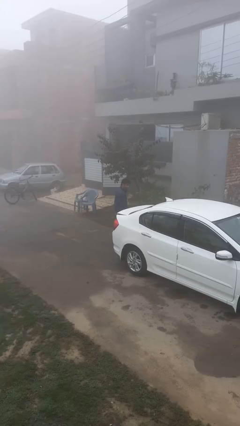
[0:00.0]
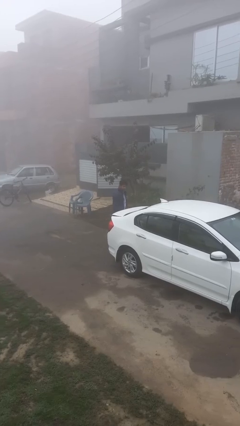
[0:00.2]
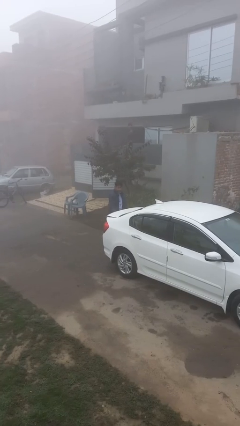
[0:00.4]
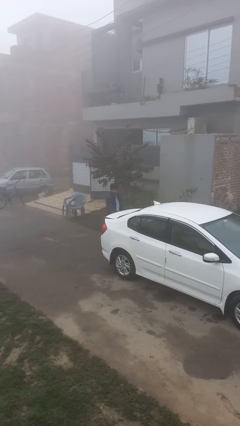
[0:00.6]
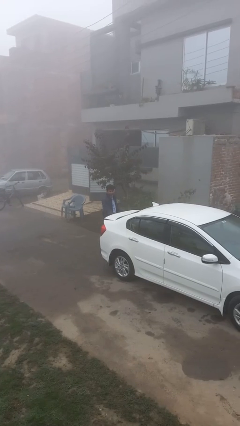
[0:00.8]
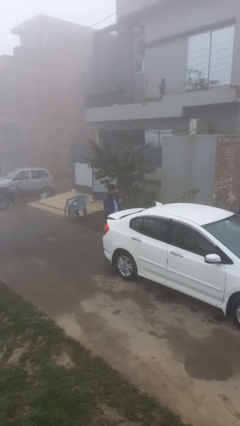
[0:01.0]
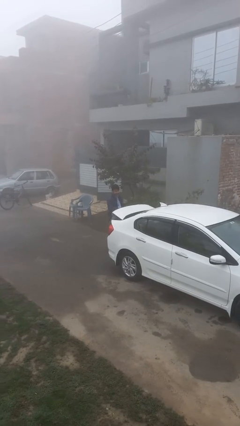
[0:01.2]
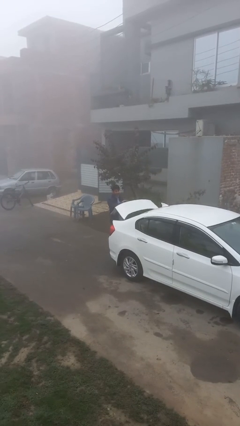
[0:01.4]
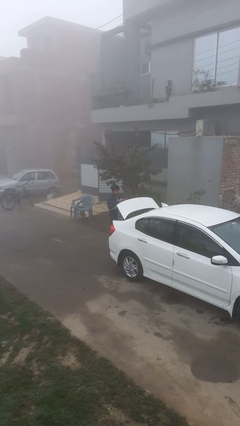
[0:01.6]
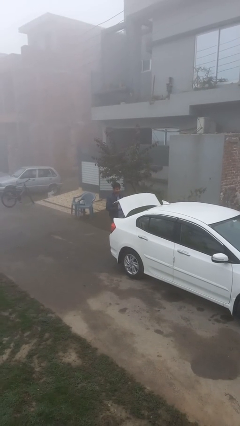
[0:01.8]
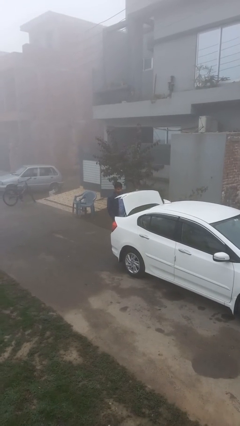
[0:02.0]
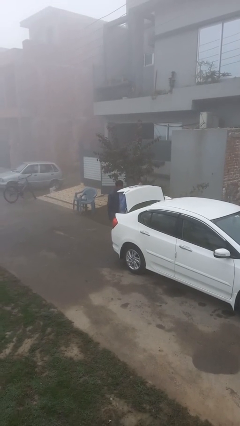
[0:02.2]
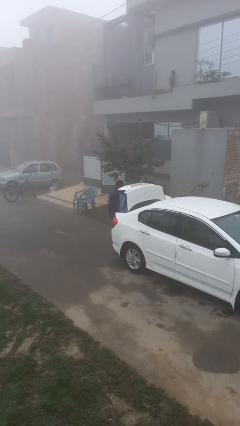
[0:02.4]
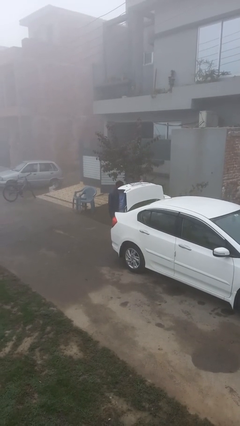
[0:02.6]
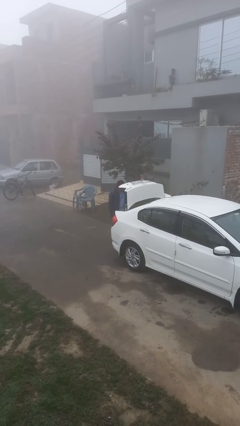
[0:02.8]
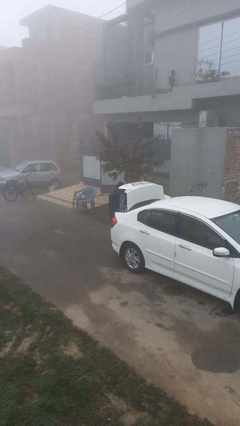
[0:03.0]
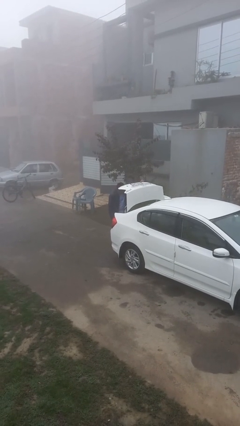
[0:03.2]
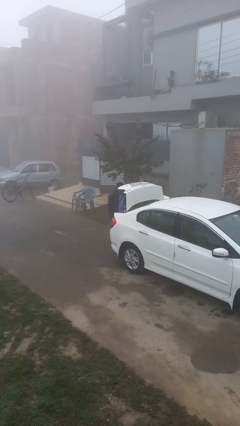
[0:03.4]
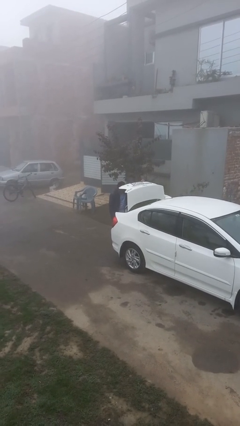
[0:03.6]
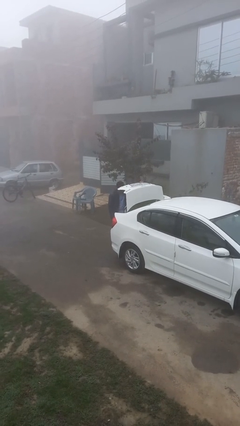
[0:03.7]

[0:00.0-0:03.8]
person opens car trunk

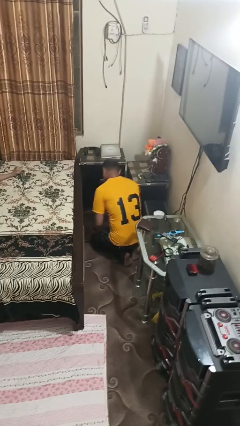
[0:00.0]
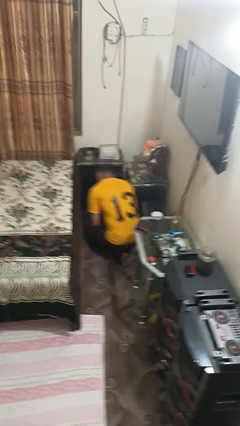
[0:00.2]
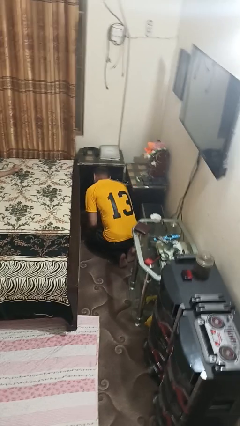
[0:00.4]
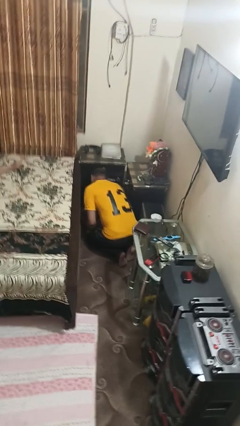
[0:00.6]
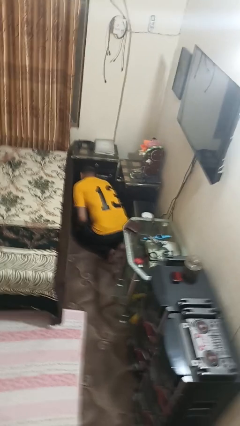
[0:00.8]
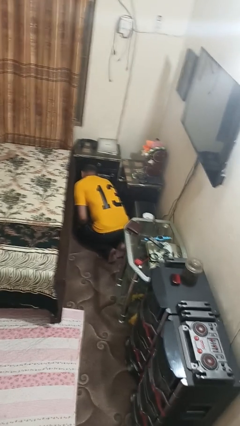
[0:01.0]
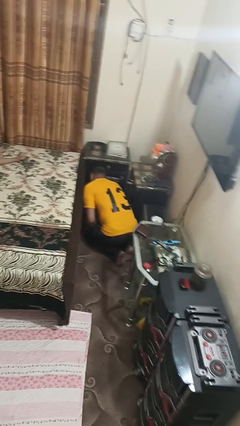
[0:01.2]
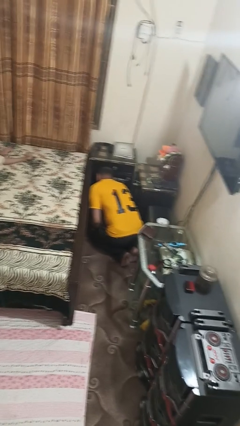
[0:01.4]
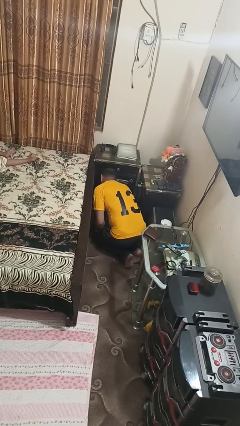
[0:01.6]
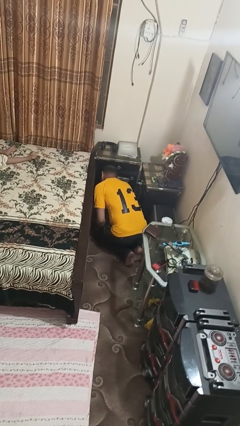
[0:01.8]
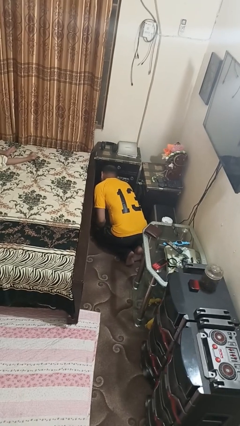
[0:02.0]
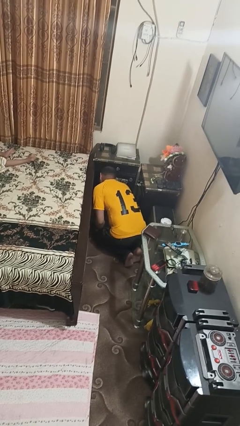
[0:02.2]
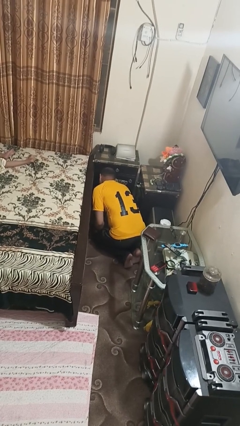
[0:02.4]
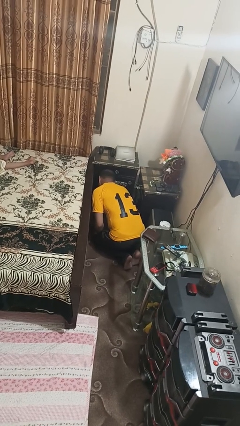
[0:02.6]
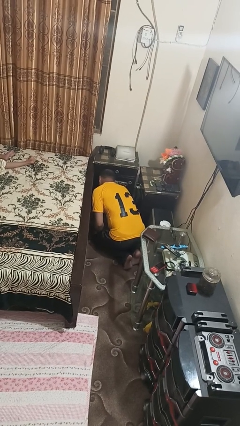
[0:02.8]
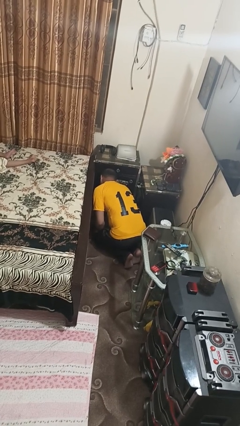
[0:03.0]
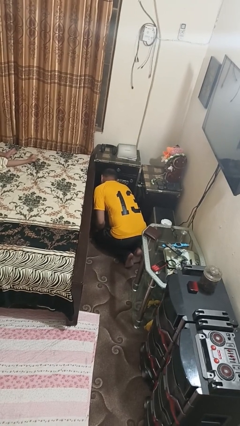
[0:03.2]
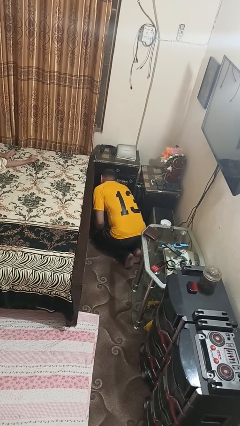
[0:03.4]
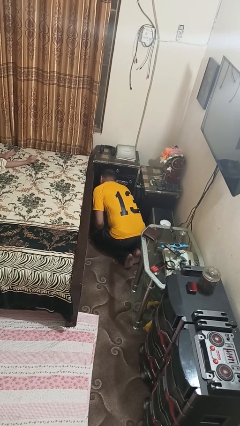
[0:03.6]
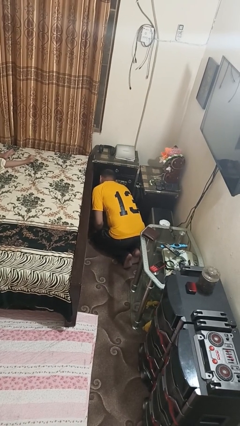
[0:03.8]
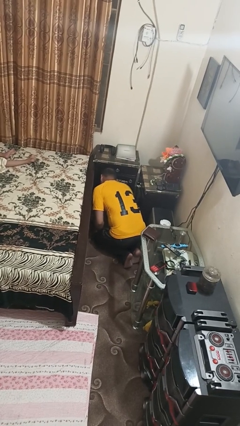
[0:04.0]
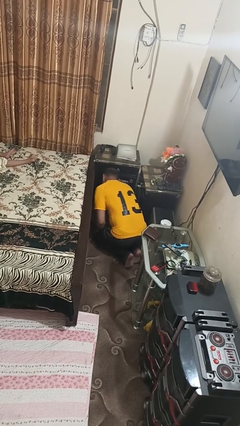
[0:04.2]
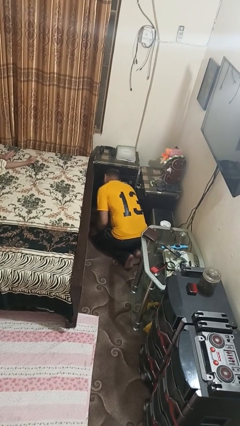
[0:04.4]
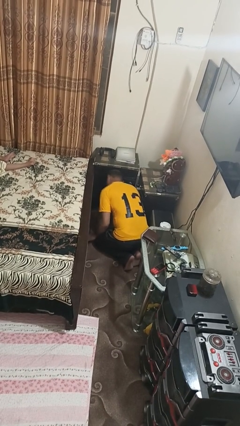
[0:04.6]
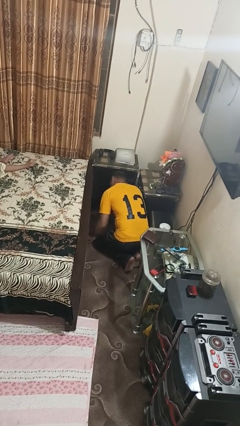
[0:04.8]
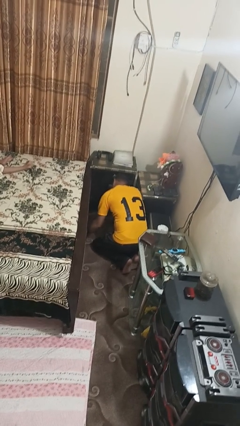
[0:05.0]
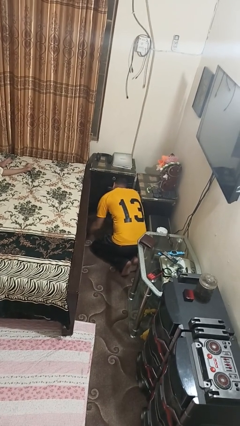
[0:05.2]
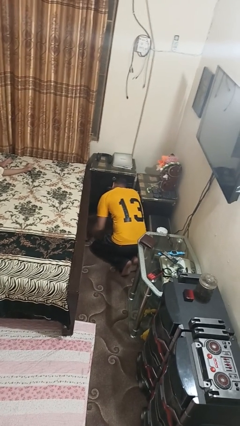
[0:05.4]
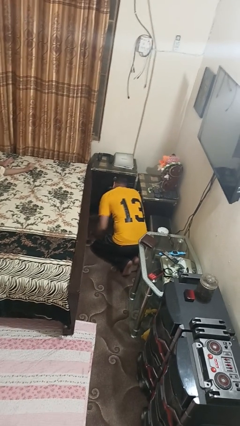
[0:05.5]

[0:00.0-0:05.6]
person searches under bed

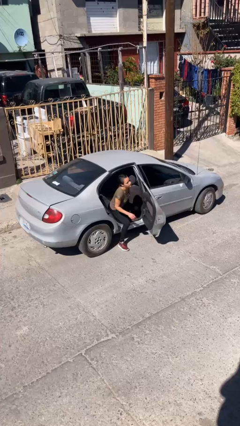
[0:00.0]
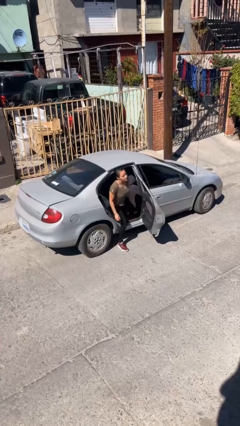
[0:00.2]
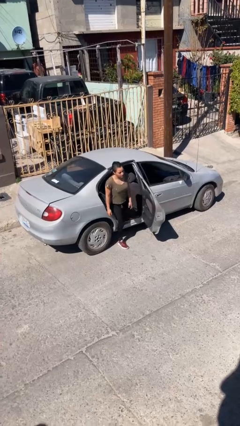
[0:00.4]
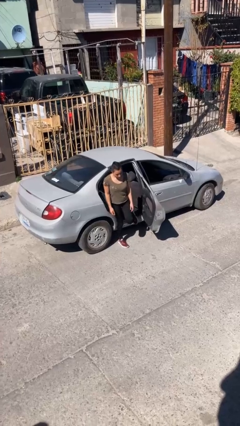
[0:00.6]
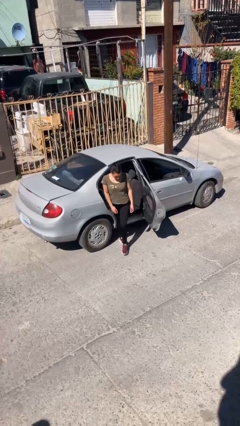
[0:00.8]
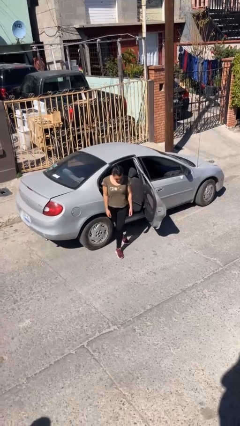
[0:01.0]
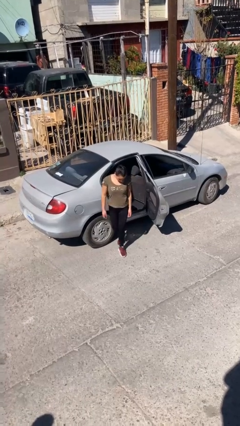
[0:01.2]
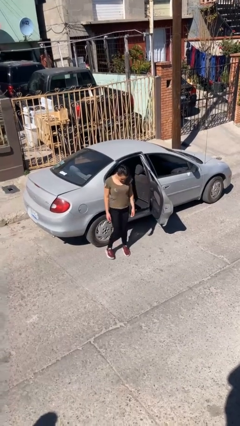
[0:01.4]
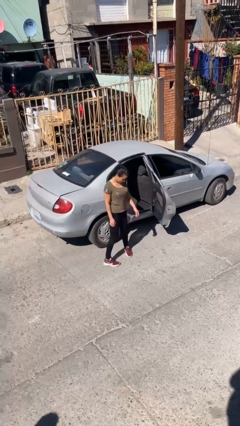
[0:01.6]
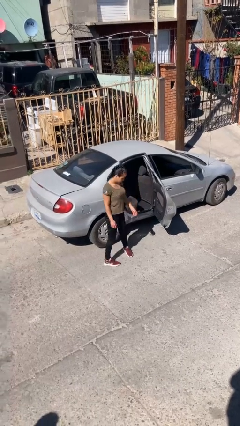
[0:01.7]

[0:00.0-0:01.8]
person exits car

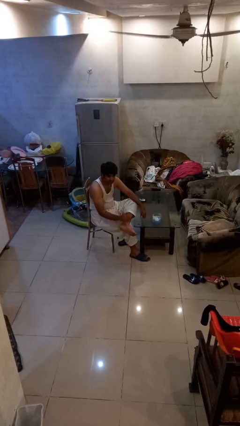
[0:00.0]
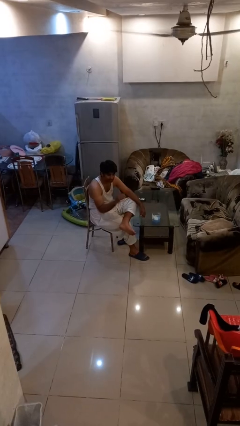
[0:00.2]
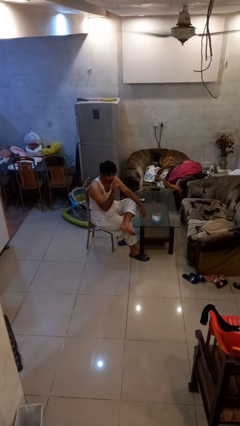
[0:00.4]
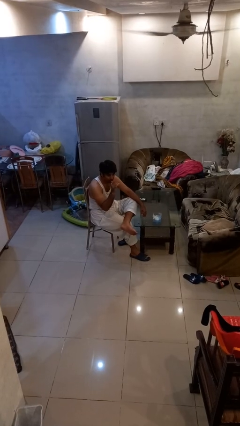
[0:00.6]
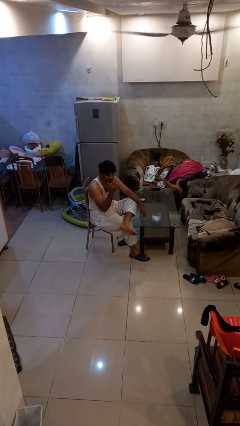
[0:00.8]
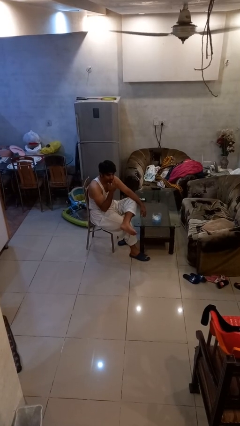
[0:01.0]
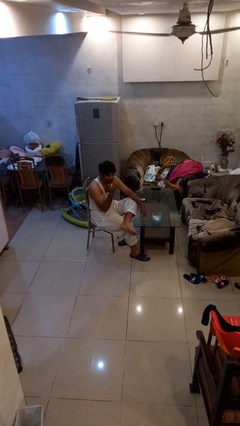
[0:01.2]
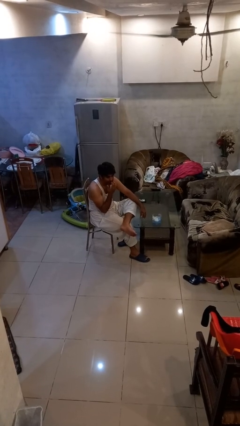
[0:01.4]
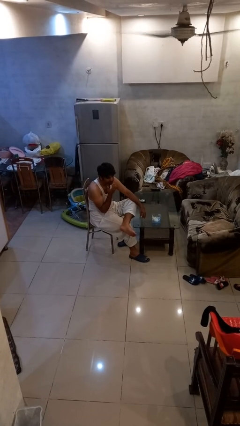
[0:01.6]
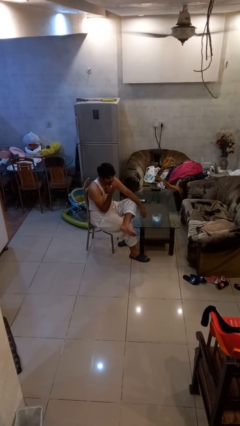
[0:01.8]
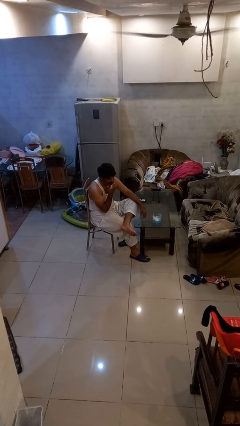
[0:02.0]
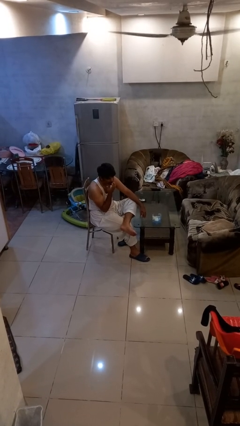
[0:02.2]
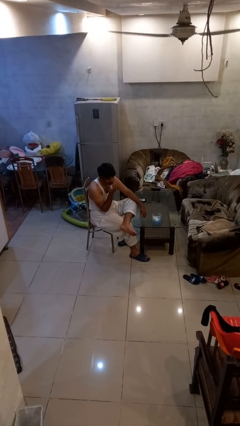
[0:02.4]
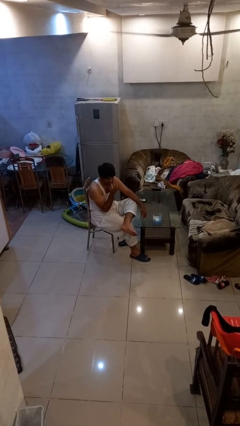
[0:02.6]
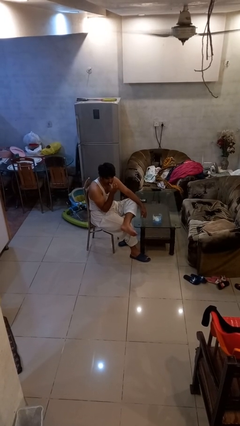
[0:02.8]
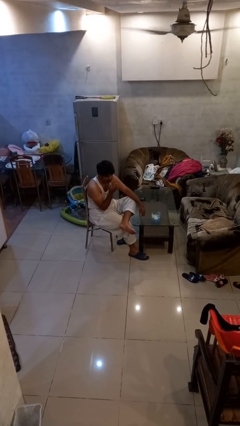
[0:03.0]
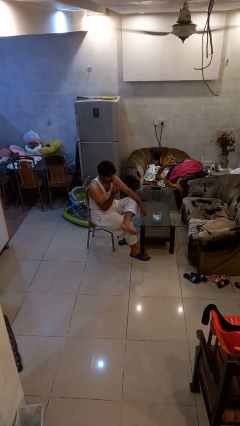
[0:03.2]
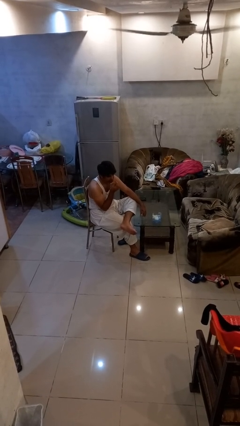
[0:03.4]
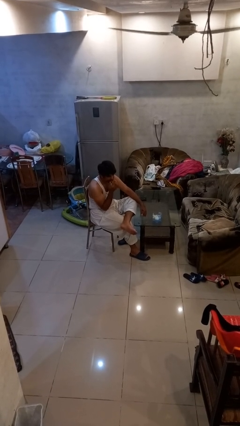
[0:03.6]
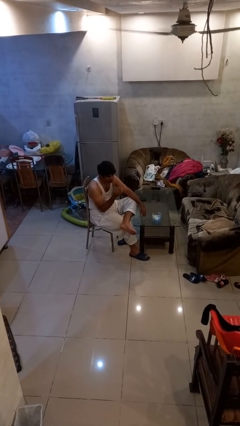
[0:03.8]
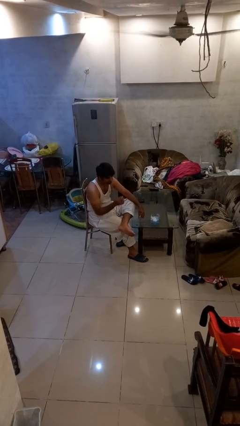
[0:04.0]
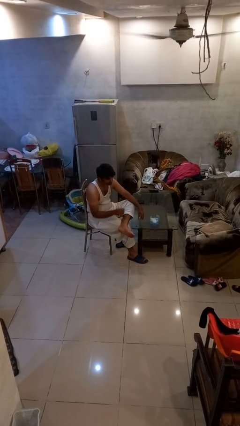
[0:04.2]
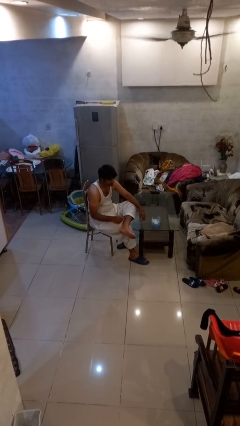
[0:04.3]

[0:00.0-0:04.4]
person licks fingers

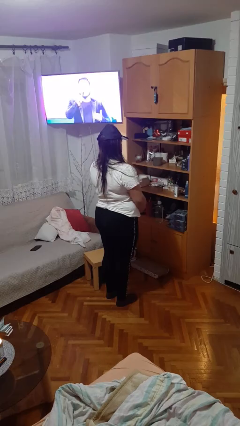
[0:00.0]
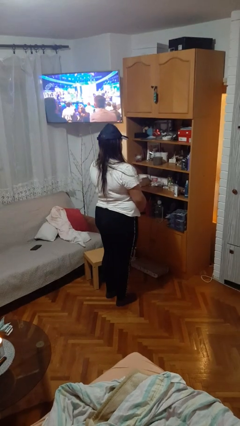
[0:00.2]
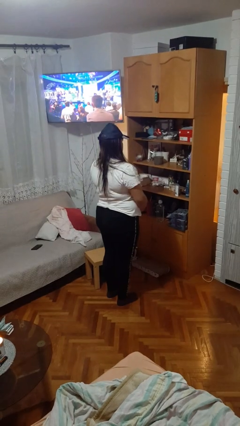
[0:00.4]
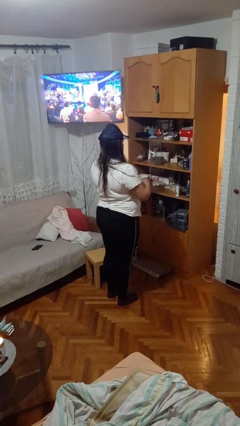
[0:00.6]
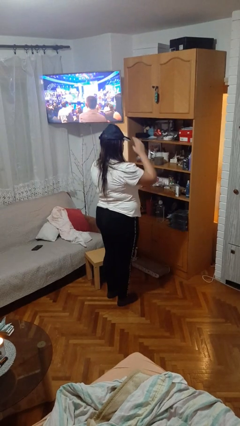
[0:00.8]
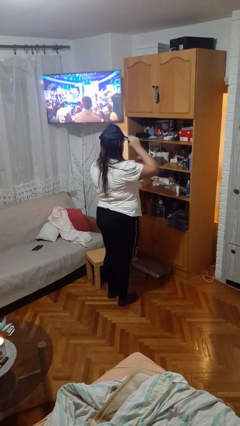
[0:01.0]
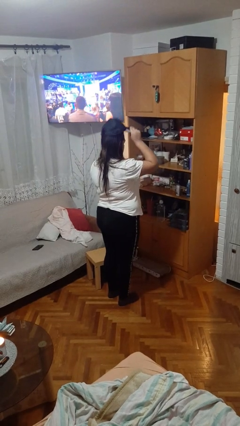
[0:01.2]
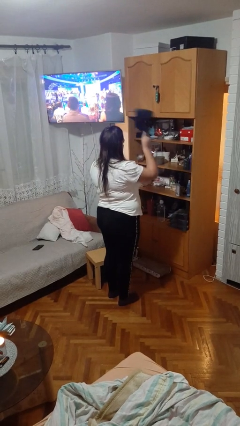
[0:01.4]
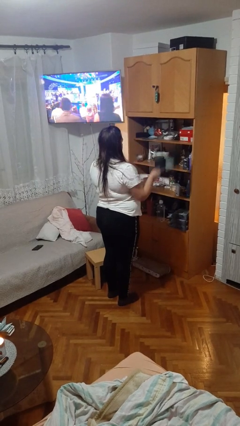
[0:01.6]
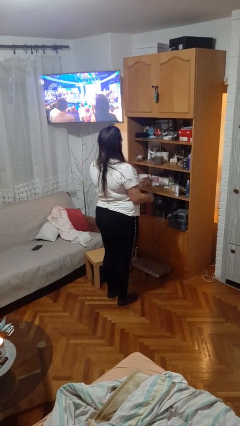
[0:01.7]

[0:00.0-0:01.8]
person takes off hat
